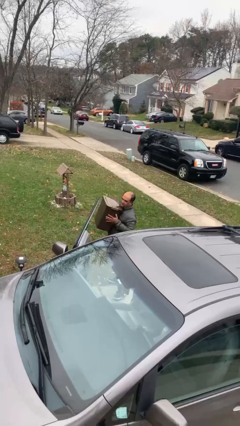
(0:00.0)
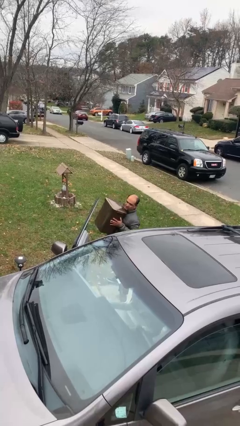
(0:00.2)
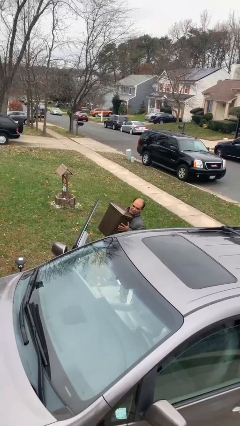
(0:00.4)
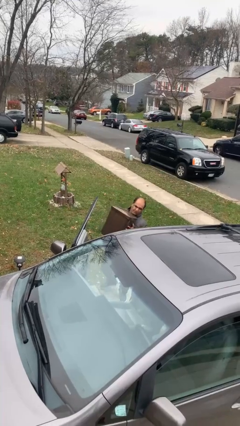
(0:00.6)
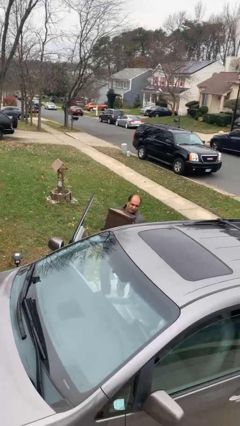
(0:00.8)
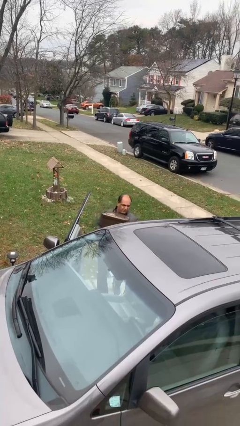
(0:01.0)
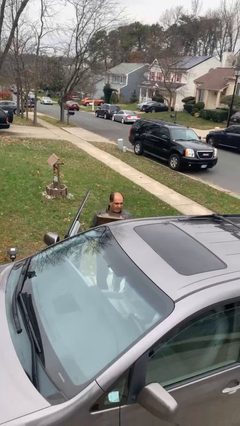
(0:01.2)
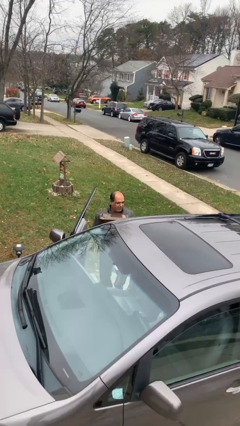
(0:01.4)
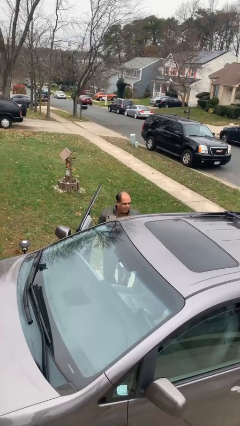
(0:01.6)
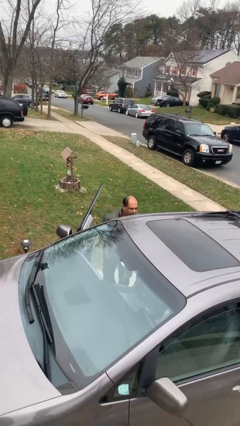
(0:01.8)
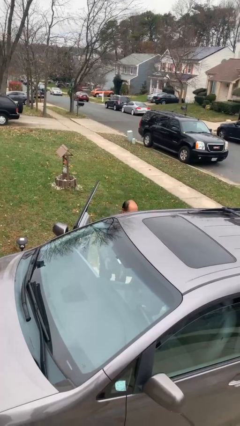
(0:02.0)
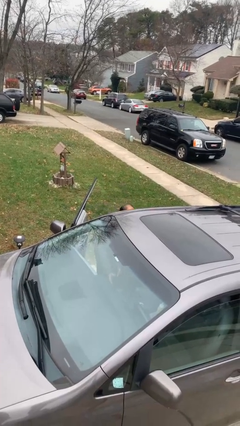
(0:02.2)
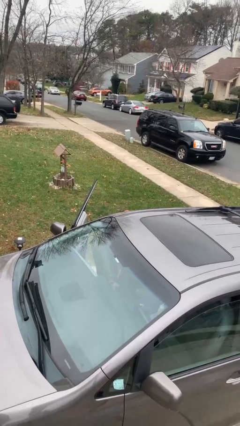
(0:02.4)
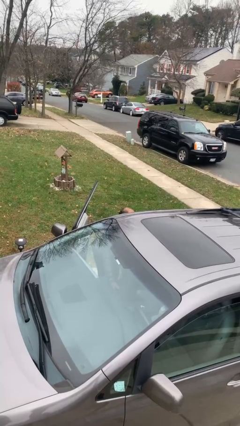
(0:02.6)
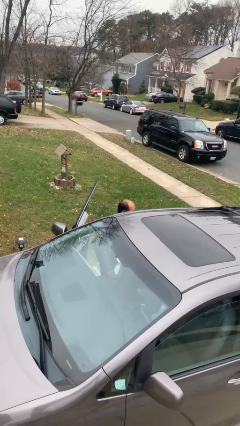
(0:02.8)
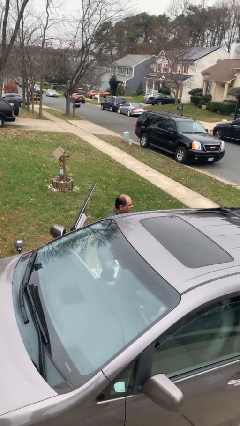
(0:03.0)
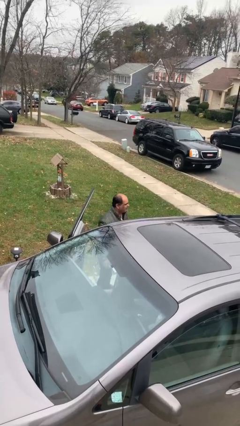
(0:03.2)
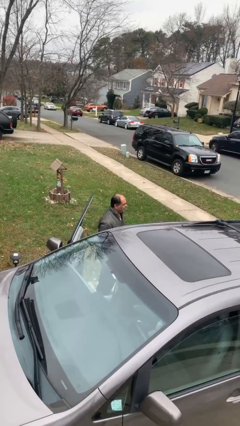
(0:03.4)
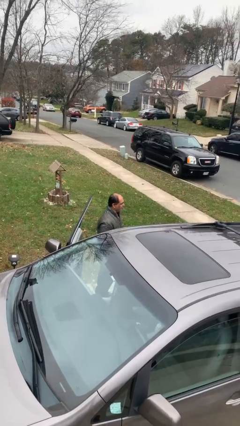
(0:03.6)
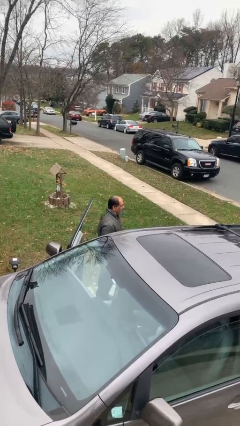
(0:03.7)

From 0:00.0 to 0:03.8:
person loads car

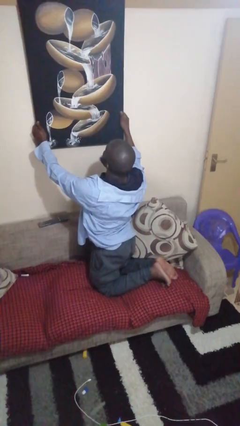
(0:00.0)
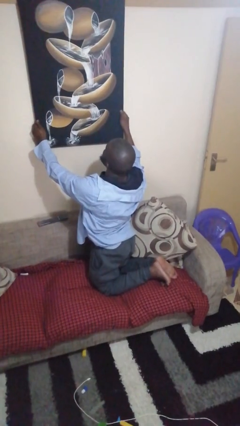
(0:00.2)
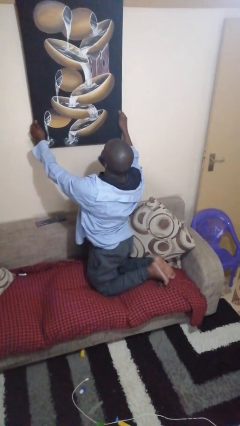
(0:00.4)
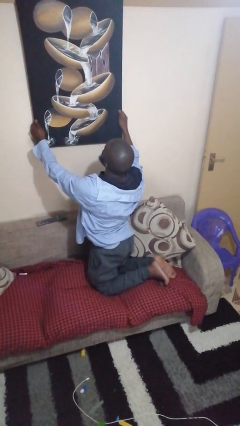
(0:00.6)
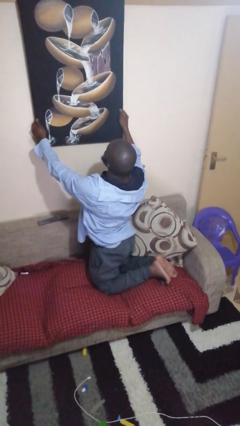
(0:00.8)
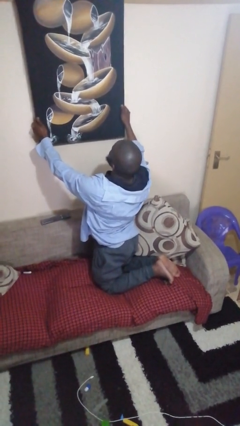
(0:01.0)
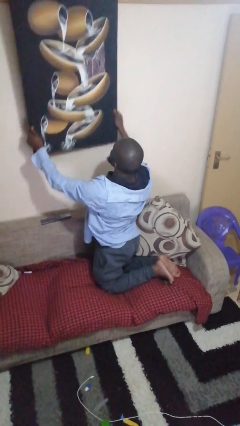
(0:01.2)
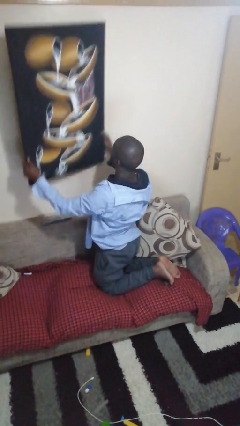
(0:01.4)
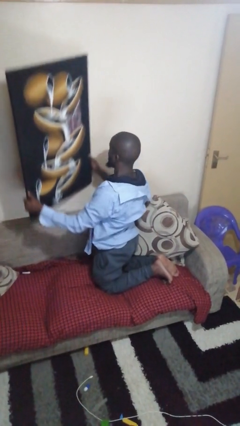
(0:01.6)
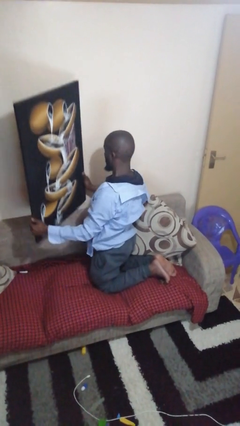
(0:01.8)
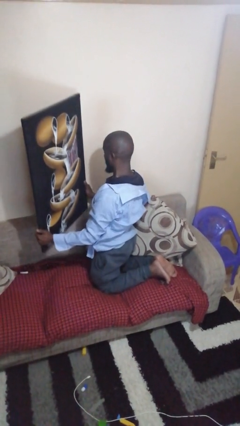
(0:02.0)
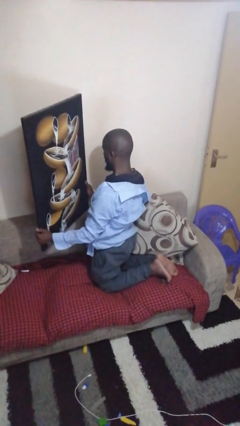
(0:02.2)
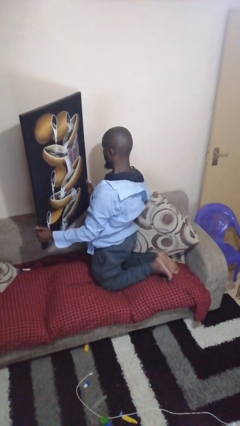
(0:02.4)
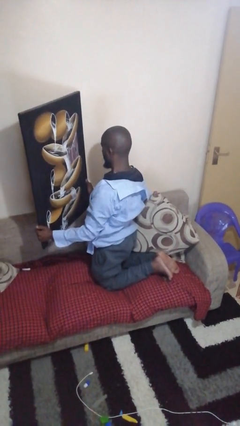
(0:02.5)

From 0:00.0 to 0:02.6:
person takes down picture frame

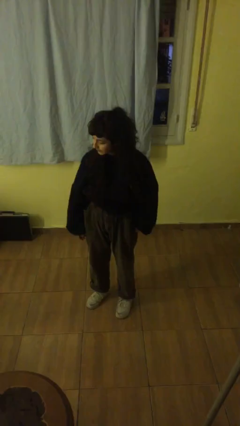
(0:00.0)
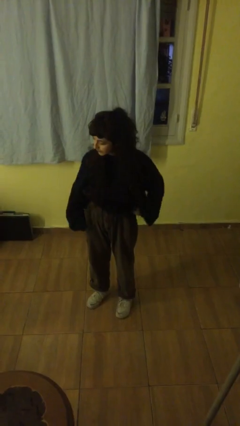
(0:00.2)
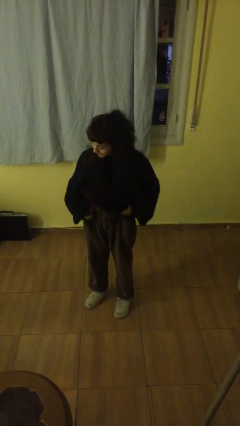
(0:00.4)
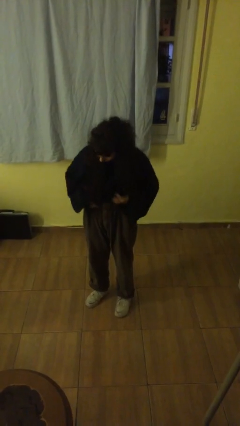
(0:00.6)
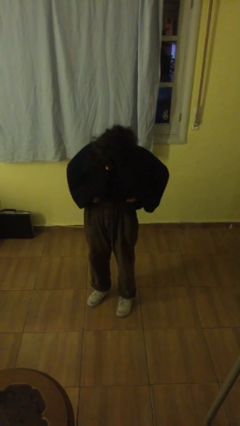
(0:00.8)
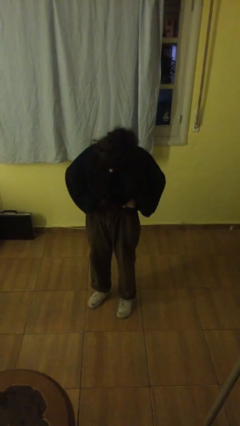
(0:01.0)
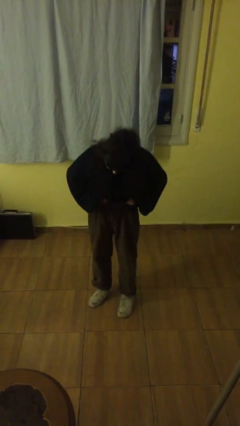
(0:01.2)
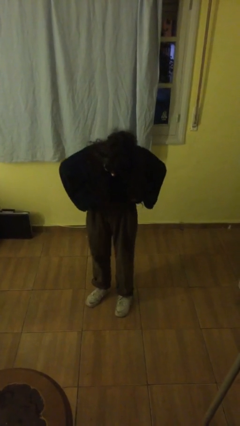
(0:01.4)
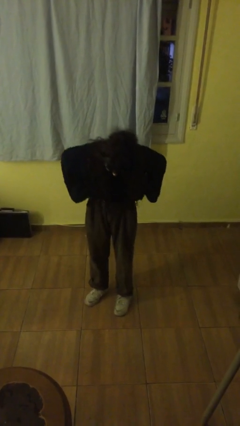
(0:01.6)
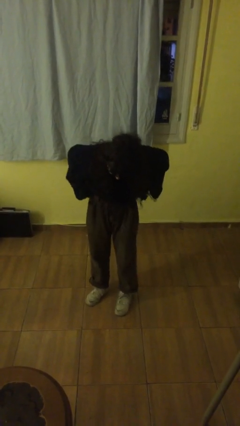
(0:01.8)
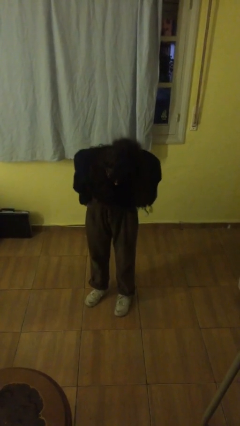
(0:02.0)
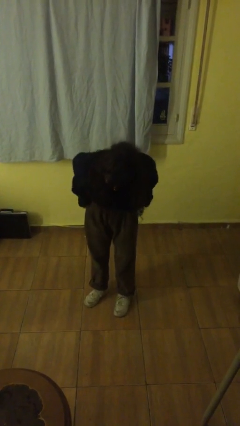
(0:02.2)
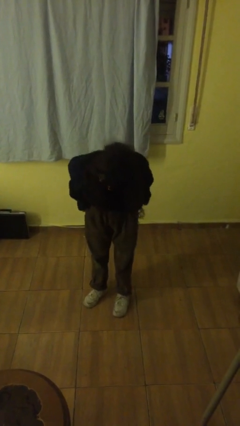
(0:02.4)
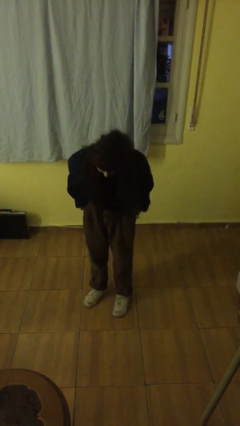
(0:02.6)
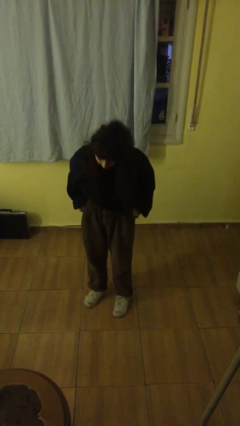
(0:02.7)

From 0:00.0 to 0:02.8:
person hikes up pants

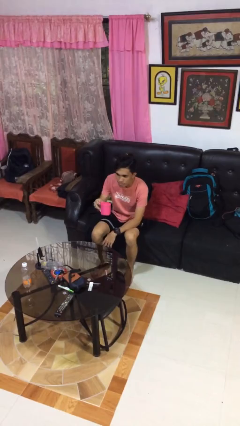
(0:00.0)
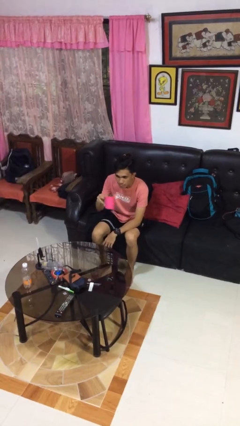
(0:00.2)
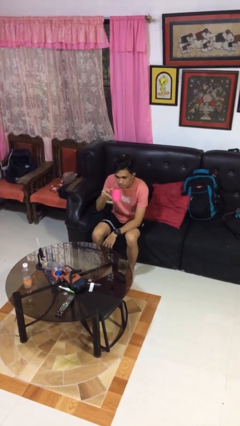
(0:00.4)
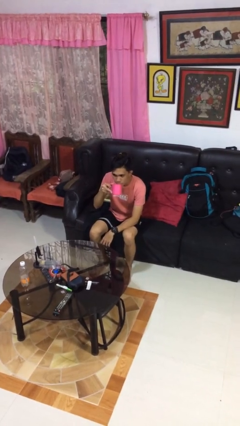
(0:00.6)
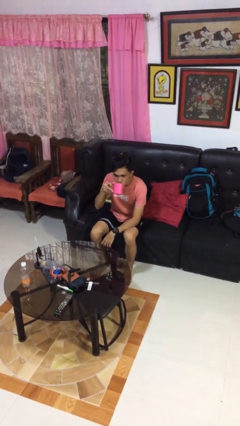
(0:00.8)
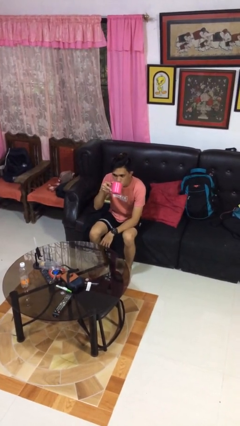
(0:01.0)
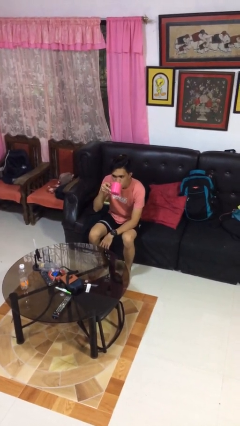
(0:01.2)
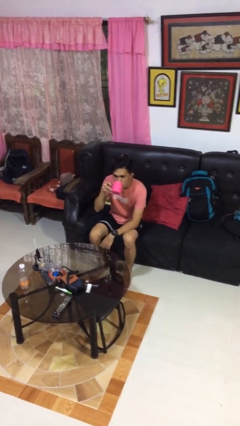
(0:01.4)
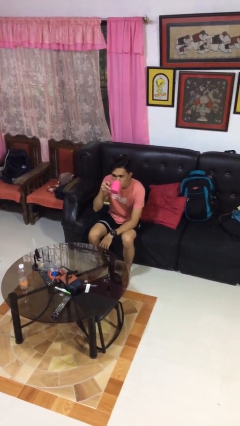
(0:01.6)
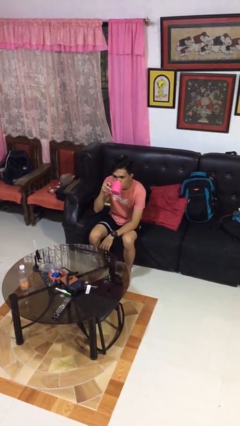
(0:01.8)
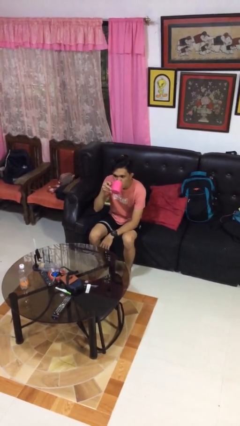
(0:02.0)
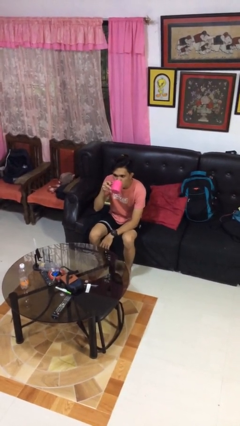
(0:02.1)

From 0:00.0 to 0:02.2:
person drinks from mug

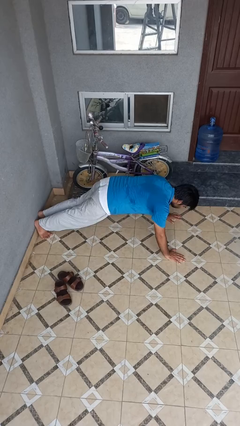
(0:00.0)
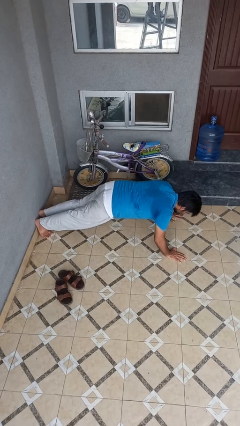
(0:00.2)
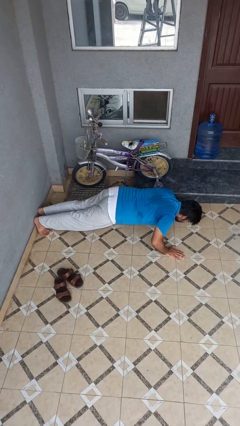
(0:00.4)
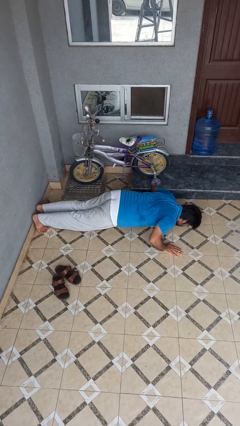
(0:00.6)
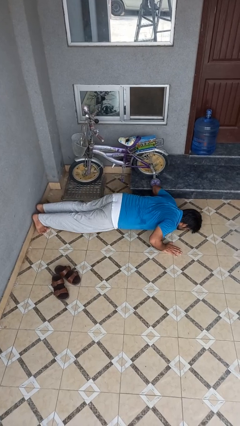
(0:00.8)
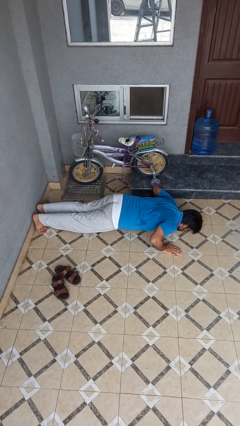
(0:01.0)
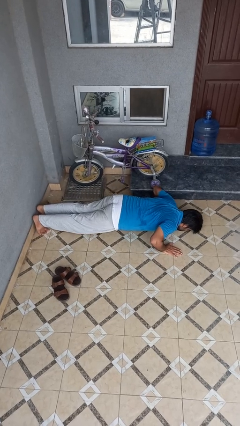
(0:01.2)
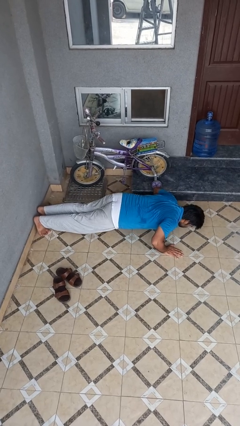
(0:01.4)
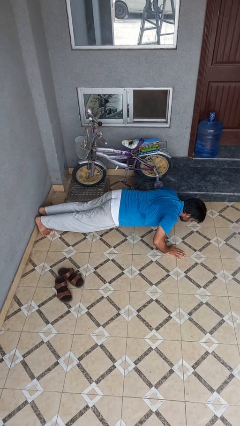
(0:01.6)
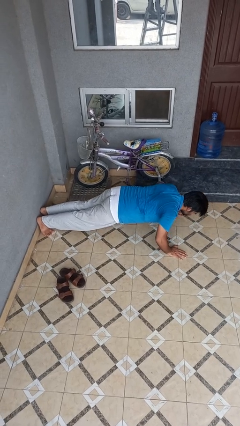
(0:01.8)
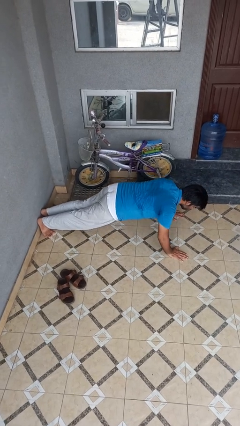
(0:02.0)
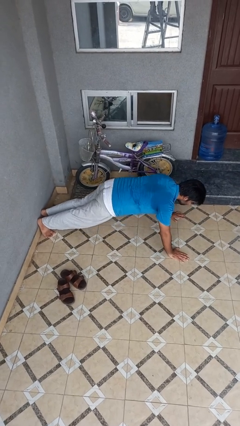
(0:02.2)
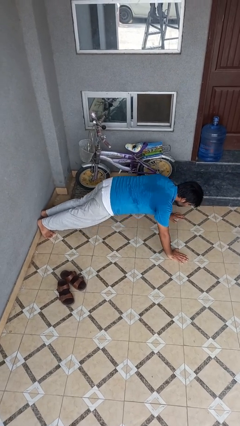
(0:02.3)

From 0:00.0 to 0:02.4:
person exercises with pushup

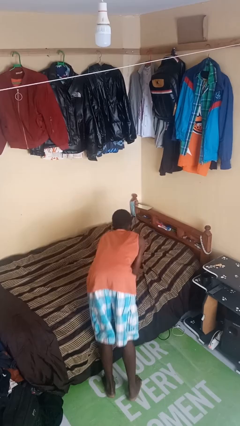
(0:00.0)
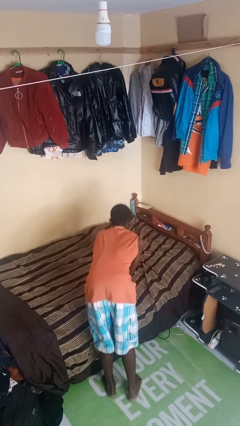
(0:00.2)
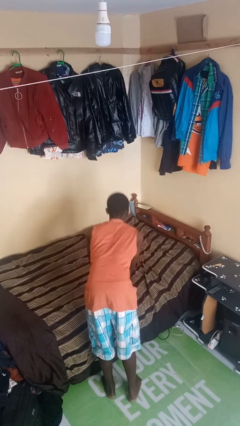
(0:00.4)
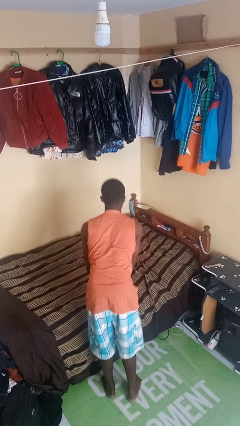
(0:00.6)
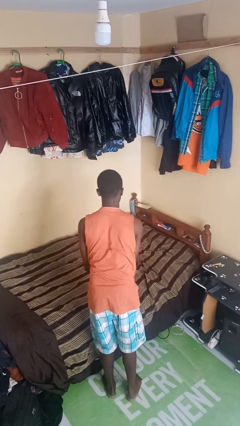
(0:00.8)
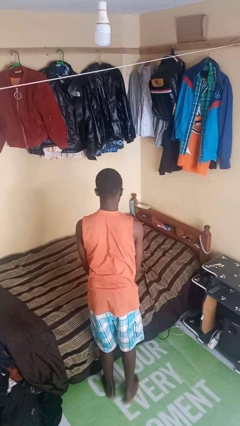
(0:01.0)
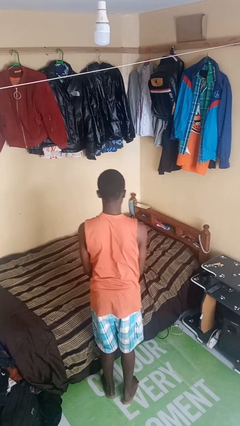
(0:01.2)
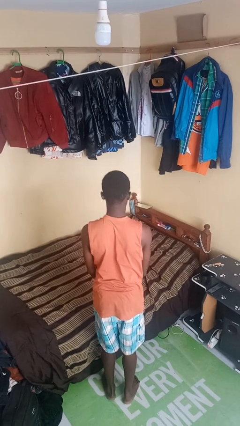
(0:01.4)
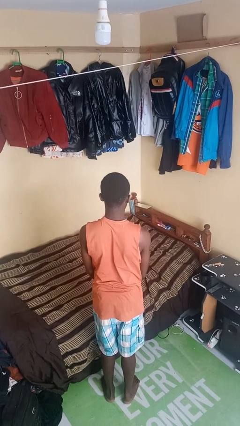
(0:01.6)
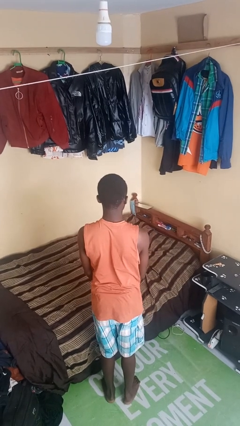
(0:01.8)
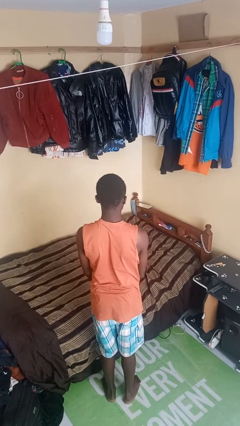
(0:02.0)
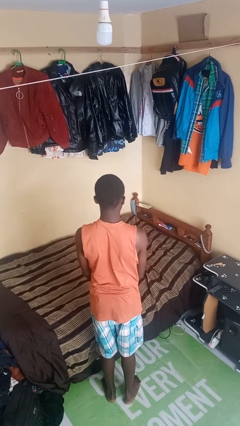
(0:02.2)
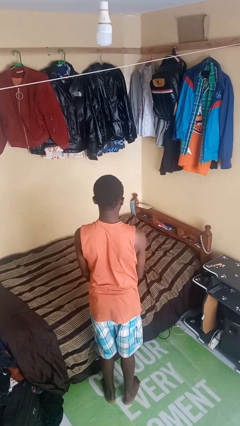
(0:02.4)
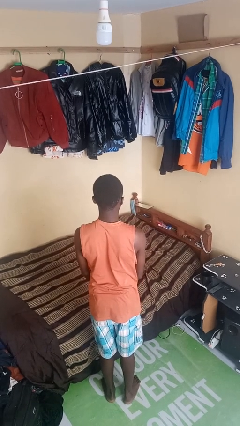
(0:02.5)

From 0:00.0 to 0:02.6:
person stands up

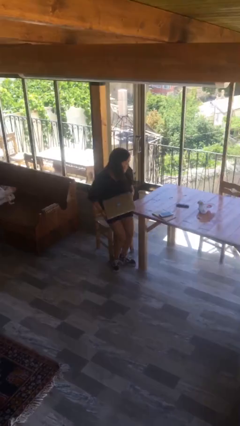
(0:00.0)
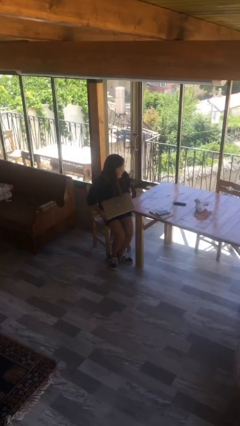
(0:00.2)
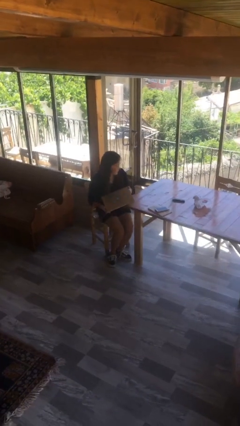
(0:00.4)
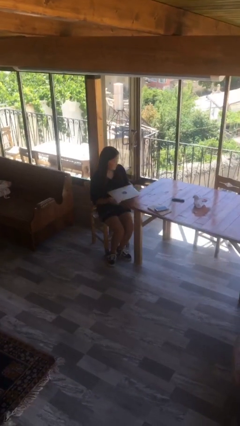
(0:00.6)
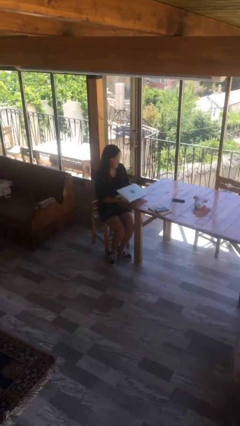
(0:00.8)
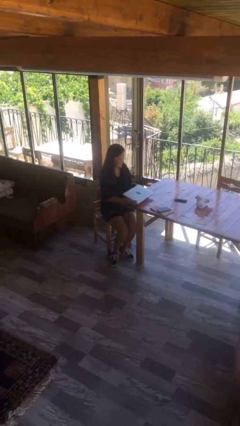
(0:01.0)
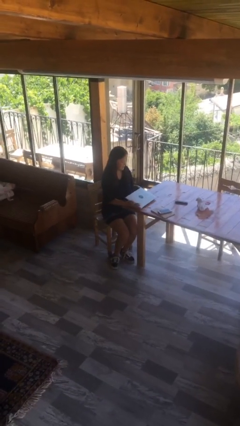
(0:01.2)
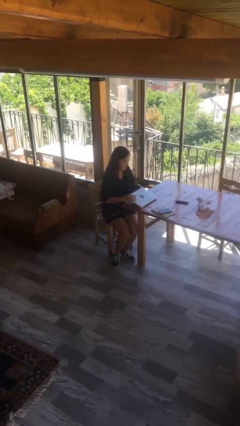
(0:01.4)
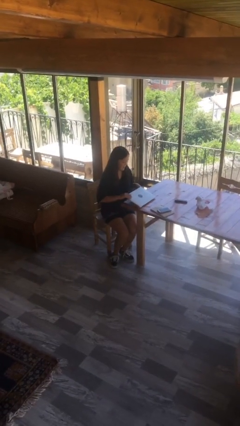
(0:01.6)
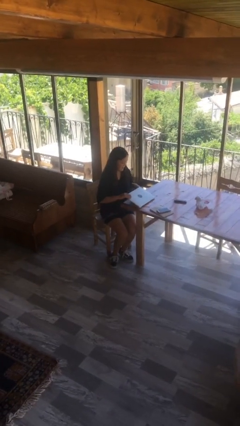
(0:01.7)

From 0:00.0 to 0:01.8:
person sits down
